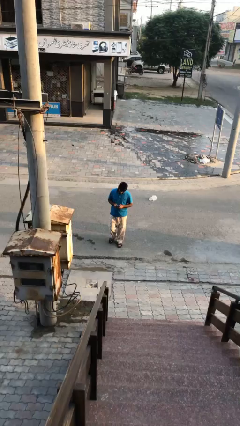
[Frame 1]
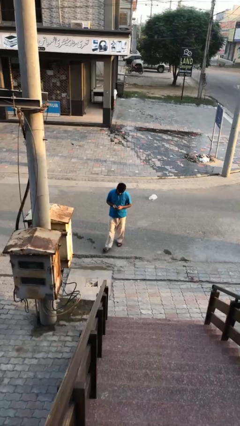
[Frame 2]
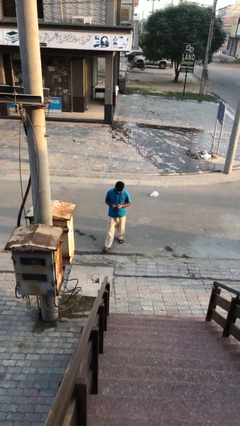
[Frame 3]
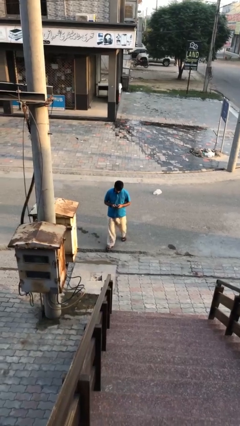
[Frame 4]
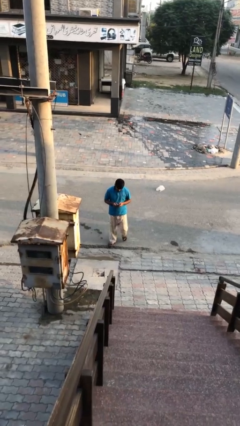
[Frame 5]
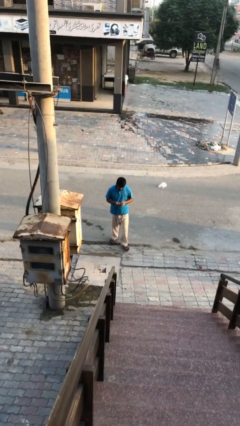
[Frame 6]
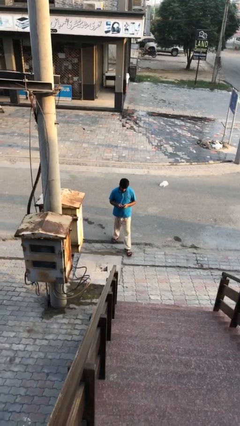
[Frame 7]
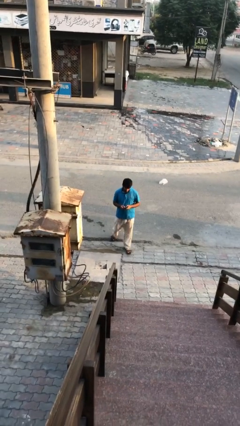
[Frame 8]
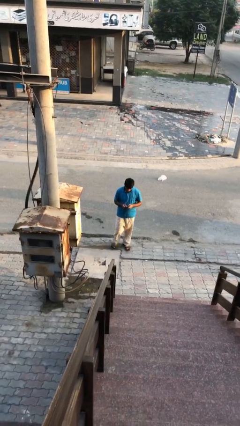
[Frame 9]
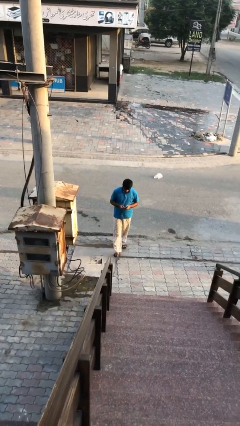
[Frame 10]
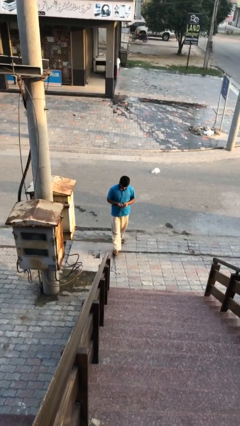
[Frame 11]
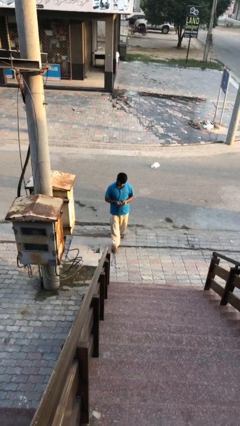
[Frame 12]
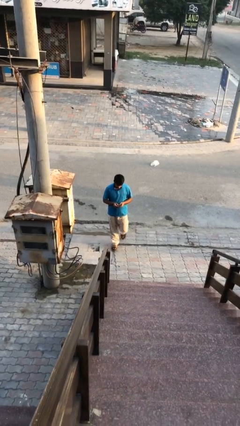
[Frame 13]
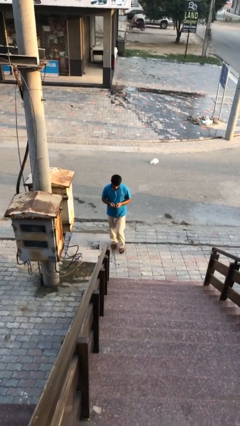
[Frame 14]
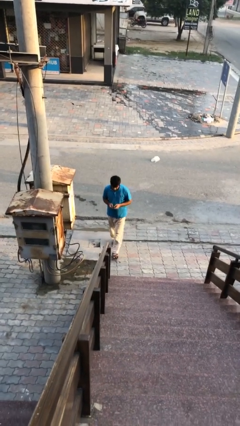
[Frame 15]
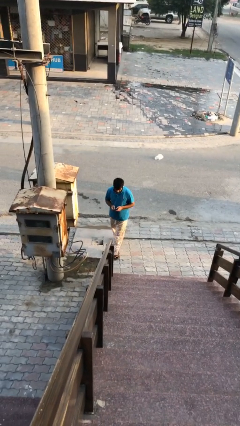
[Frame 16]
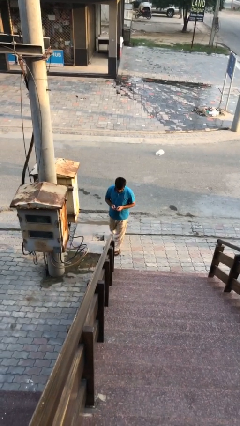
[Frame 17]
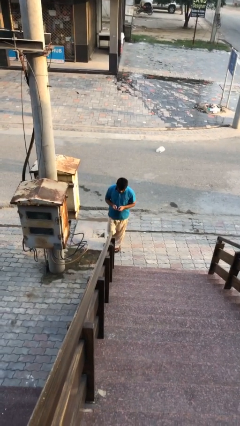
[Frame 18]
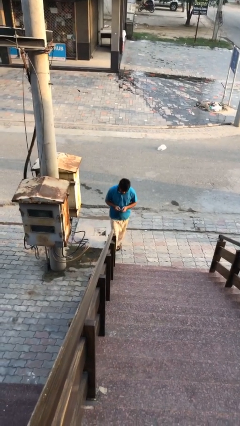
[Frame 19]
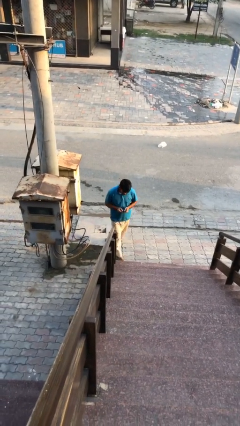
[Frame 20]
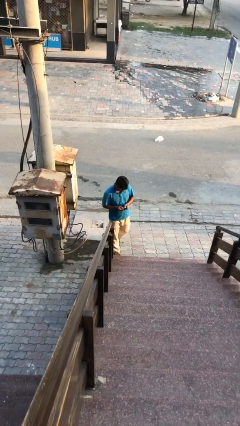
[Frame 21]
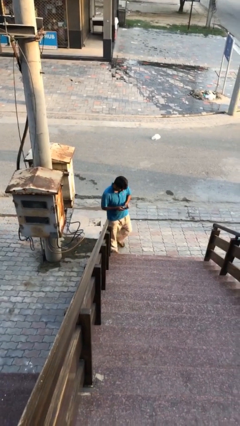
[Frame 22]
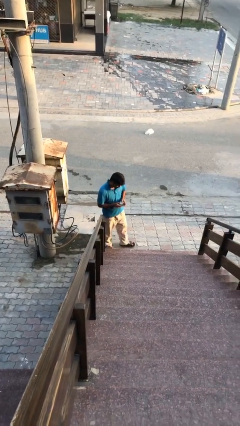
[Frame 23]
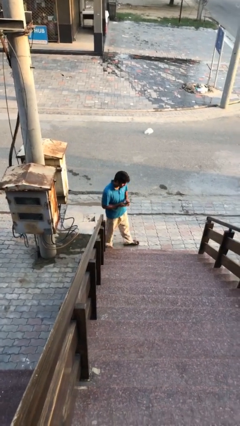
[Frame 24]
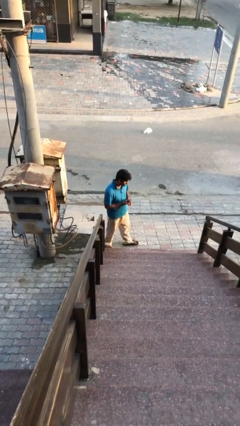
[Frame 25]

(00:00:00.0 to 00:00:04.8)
person texts on phone

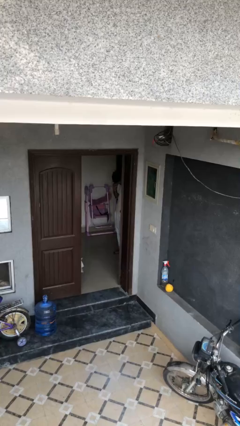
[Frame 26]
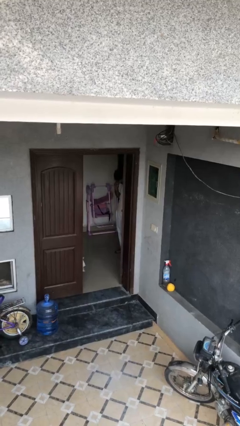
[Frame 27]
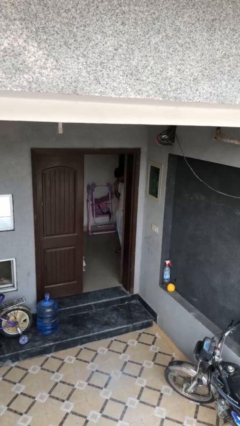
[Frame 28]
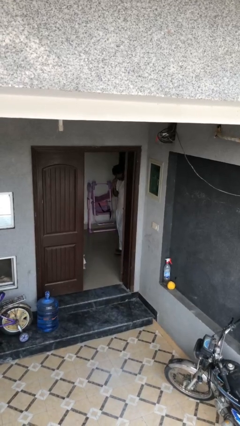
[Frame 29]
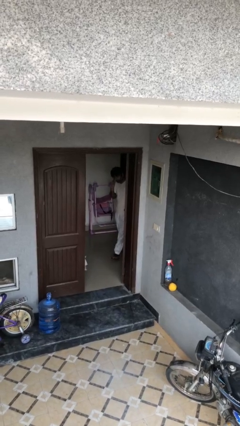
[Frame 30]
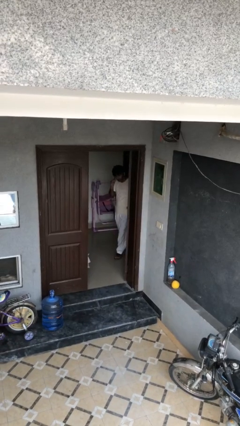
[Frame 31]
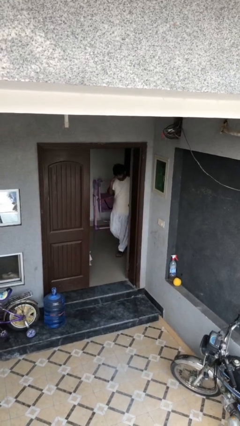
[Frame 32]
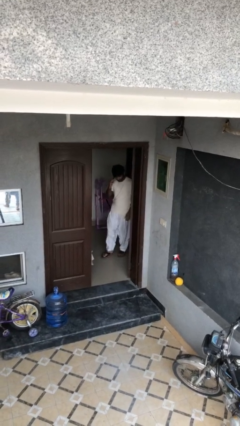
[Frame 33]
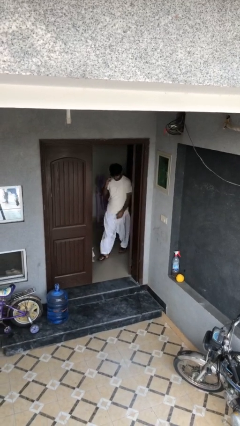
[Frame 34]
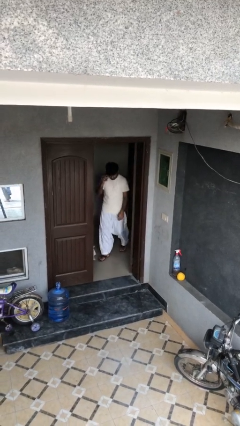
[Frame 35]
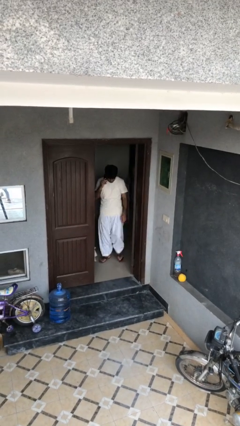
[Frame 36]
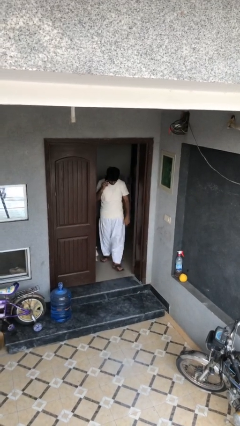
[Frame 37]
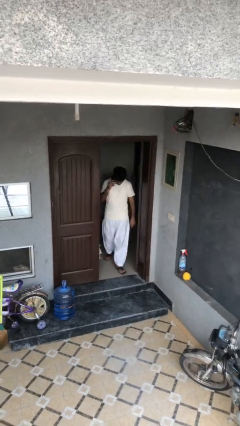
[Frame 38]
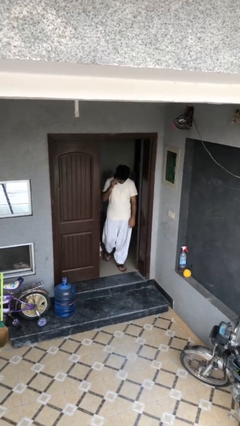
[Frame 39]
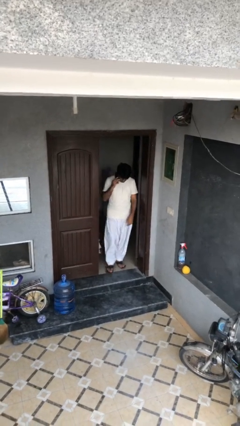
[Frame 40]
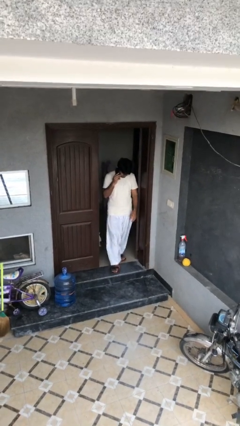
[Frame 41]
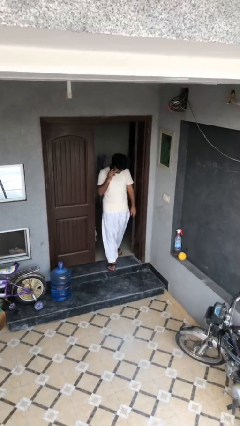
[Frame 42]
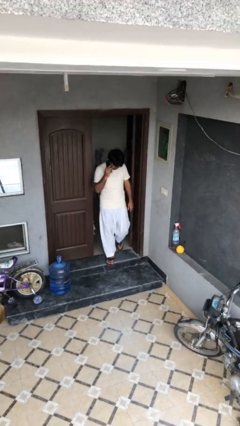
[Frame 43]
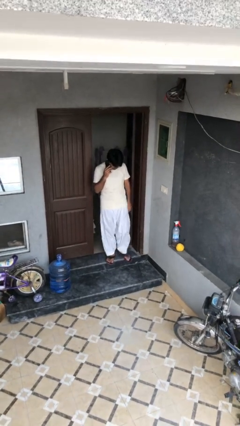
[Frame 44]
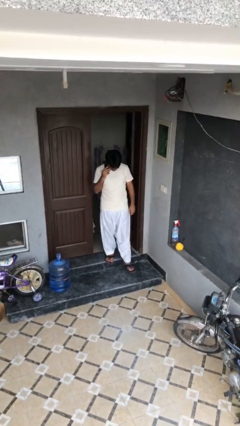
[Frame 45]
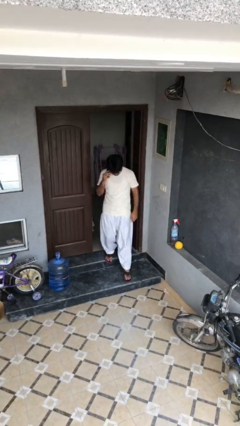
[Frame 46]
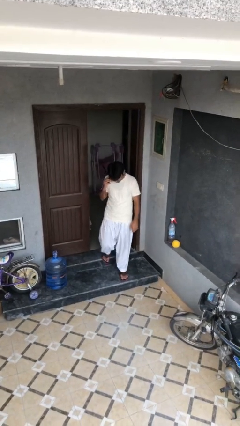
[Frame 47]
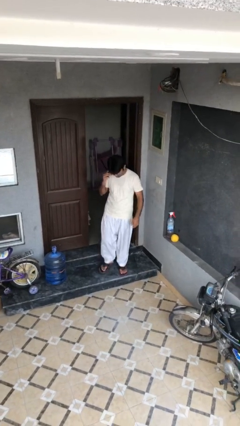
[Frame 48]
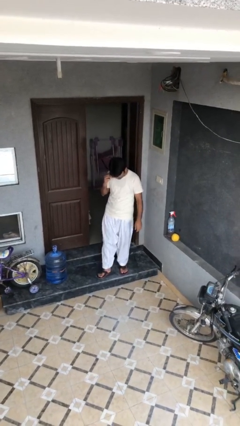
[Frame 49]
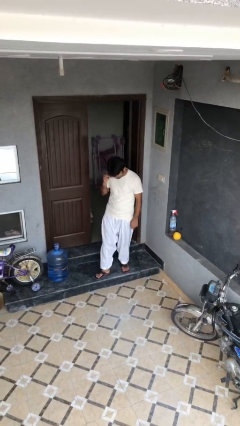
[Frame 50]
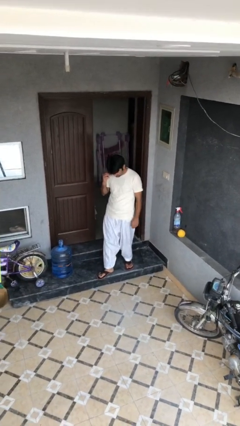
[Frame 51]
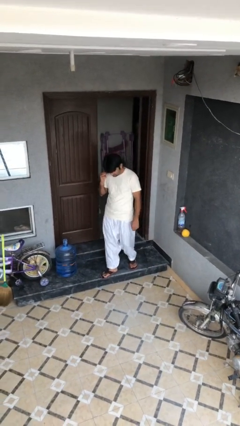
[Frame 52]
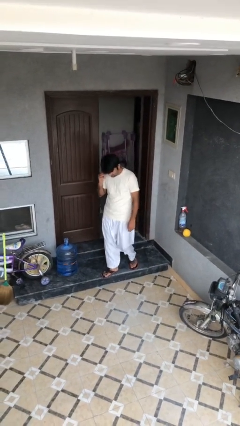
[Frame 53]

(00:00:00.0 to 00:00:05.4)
person enters scene through structure

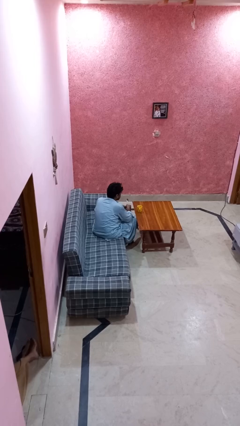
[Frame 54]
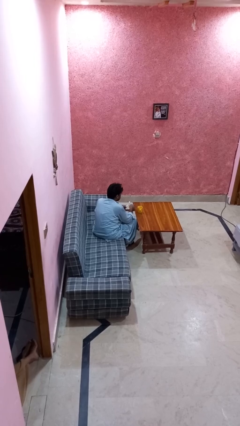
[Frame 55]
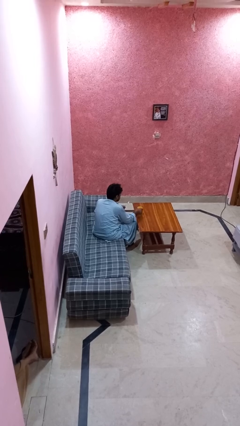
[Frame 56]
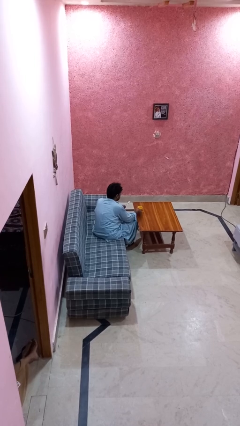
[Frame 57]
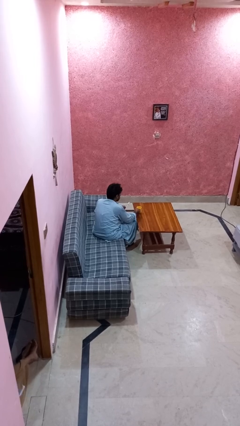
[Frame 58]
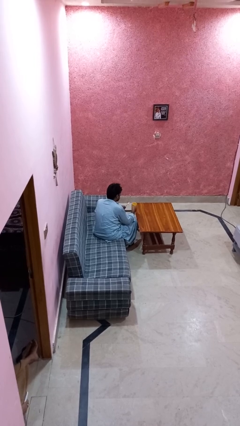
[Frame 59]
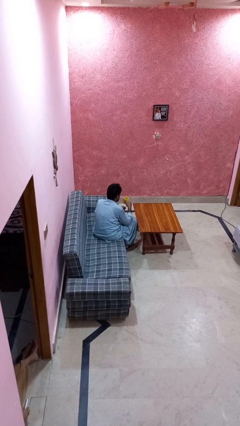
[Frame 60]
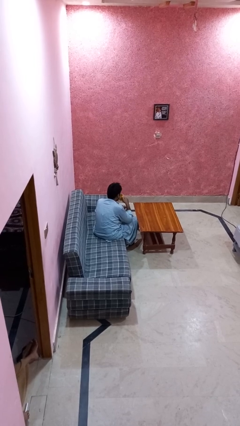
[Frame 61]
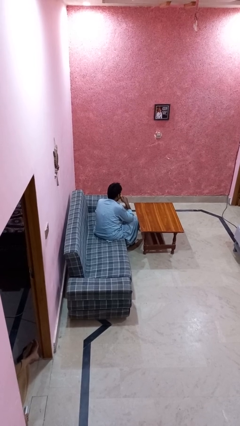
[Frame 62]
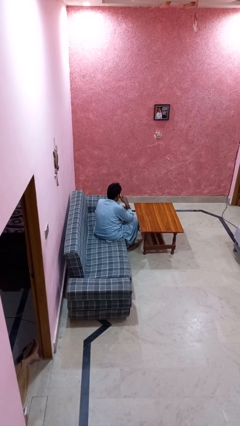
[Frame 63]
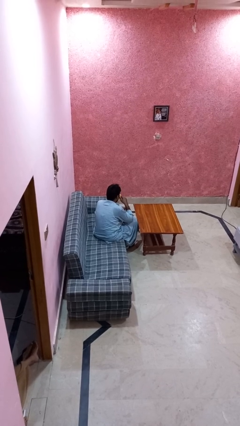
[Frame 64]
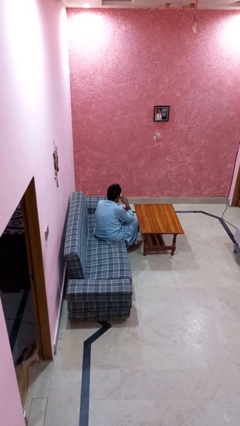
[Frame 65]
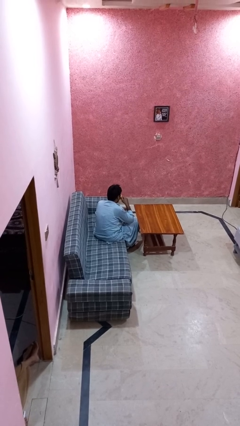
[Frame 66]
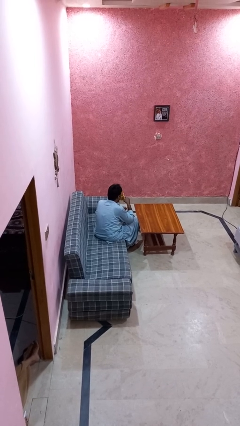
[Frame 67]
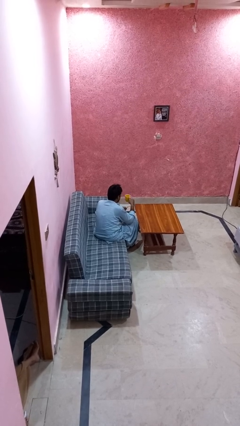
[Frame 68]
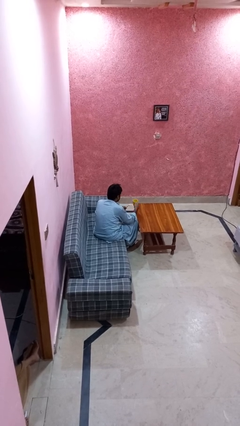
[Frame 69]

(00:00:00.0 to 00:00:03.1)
person drinks from mug

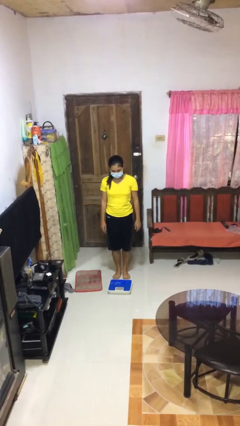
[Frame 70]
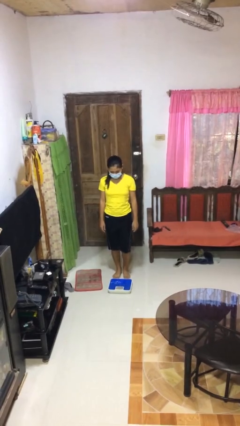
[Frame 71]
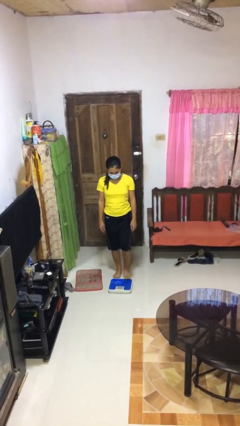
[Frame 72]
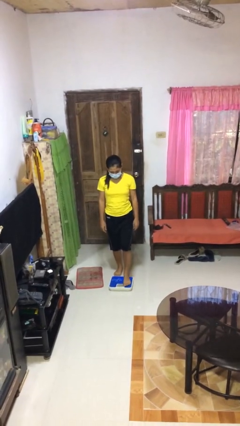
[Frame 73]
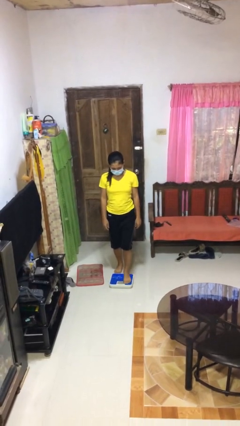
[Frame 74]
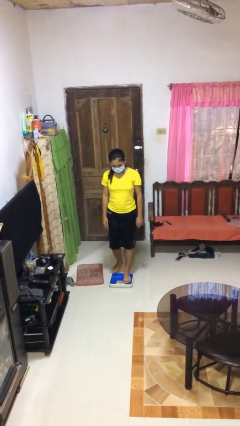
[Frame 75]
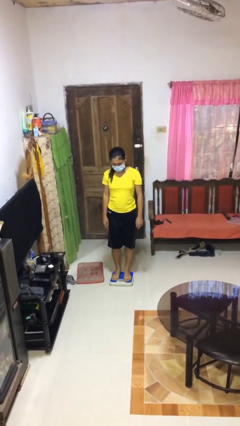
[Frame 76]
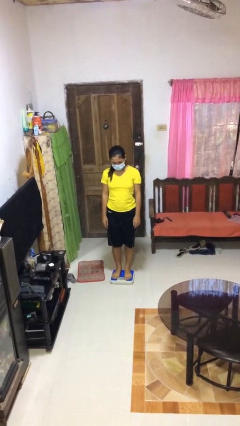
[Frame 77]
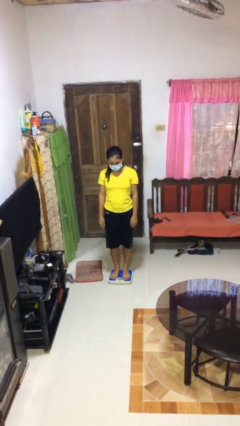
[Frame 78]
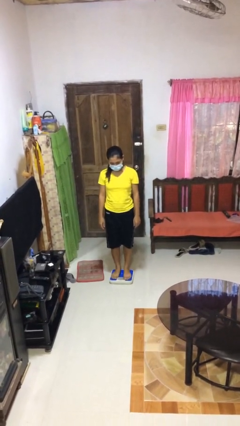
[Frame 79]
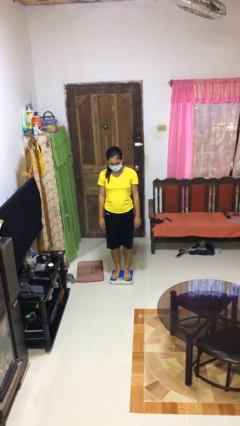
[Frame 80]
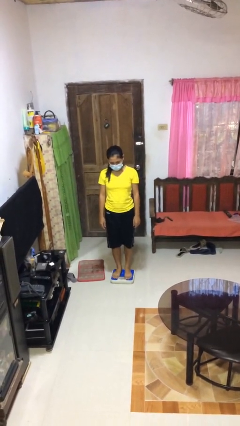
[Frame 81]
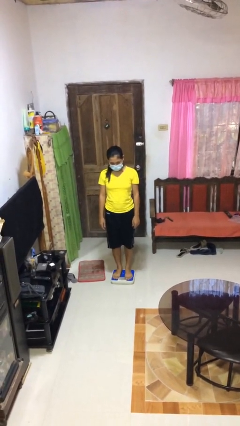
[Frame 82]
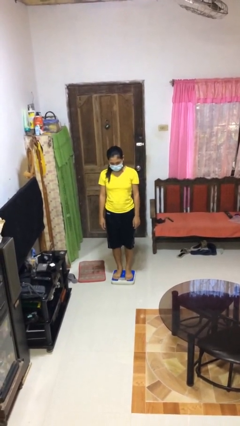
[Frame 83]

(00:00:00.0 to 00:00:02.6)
person uses bodyweight scale

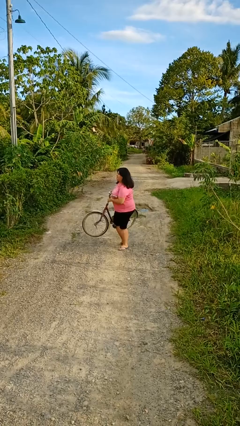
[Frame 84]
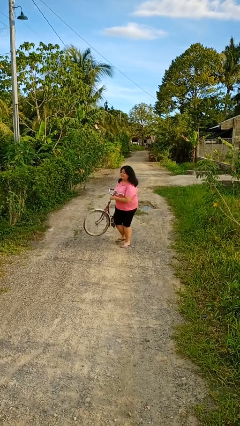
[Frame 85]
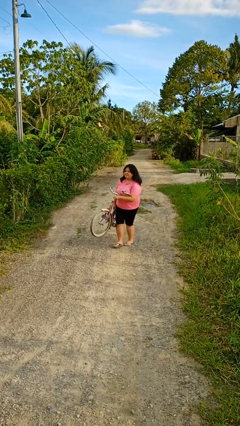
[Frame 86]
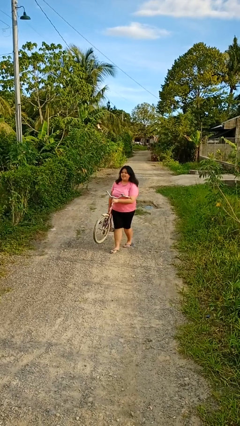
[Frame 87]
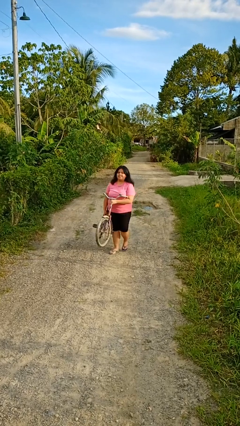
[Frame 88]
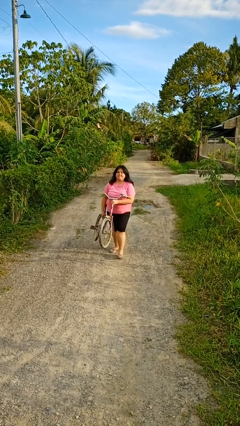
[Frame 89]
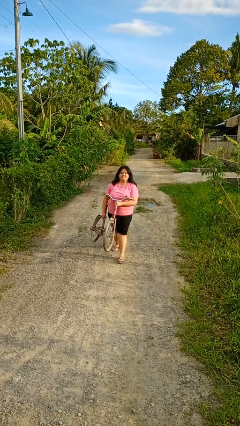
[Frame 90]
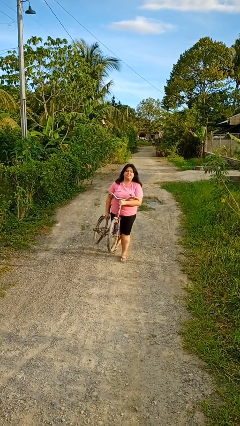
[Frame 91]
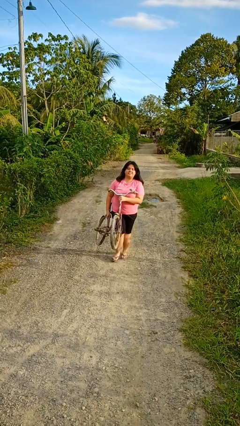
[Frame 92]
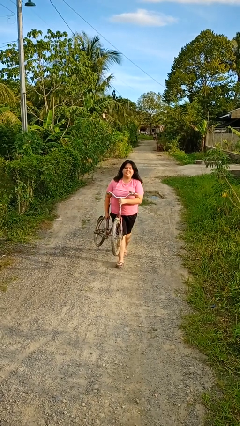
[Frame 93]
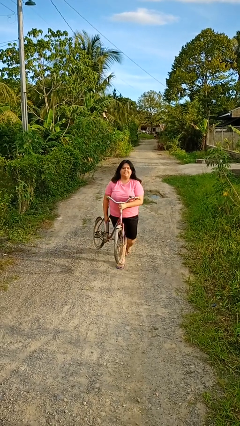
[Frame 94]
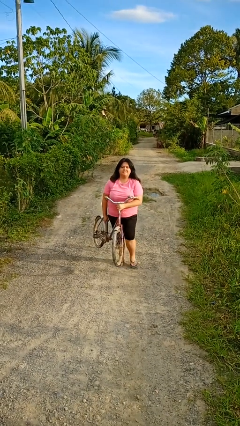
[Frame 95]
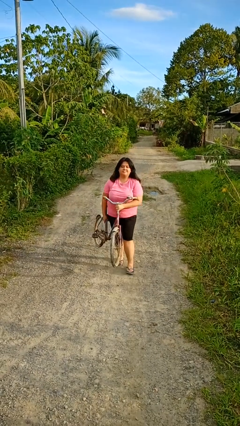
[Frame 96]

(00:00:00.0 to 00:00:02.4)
person carries bicycle
